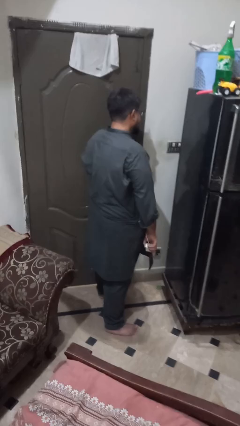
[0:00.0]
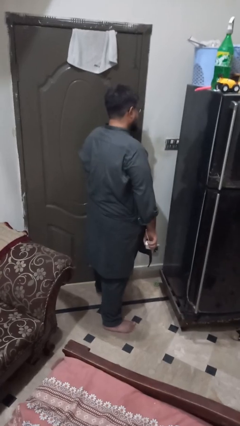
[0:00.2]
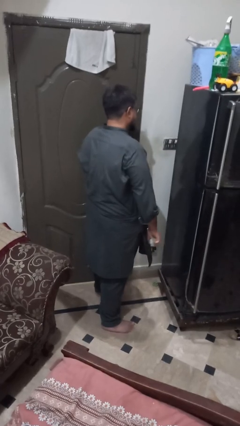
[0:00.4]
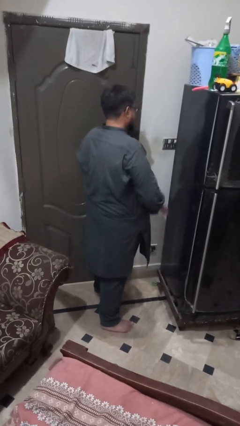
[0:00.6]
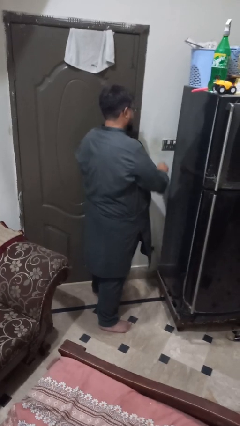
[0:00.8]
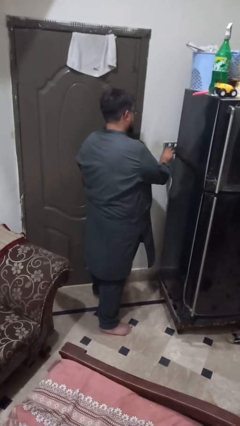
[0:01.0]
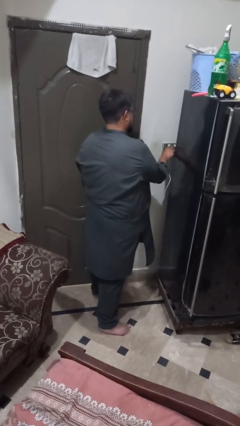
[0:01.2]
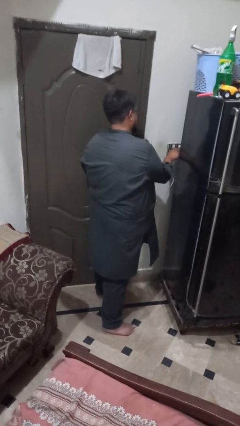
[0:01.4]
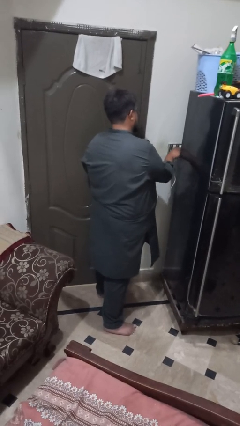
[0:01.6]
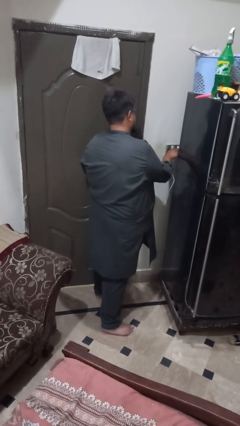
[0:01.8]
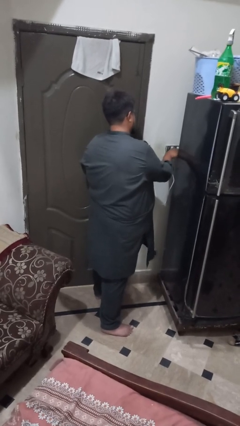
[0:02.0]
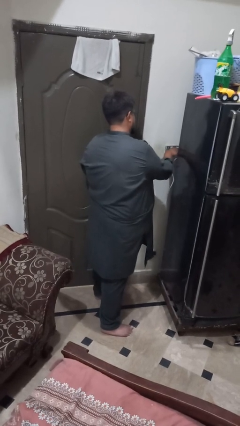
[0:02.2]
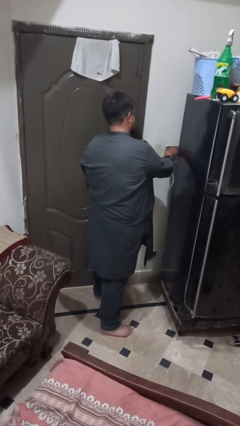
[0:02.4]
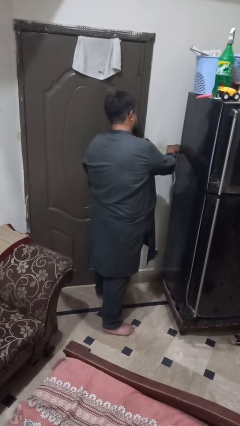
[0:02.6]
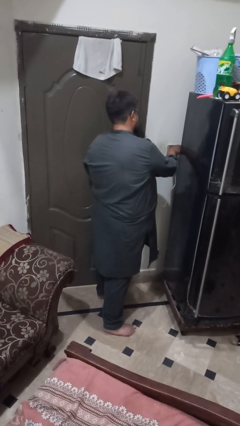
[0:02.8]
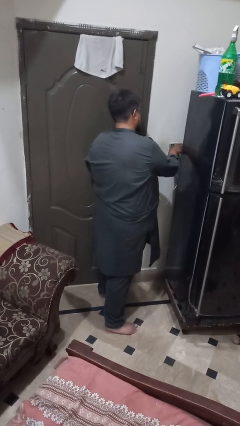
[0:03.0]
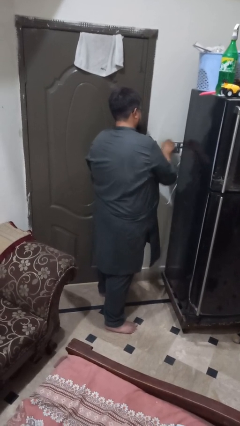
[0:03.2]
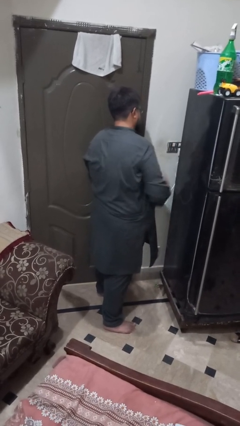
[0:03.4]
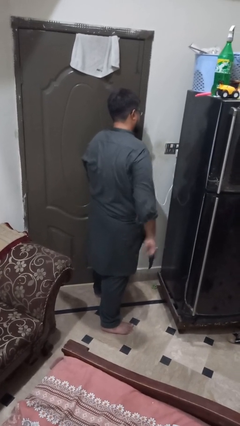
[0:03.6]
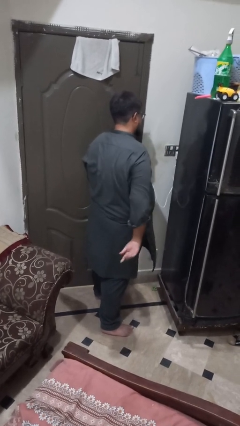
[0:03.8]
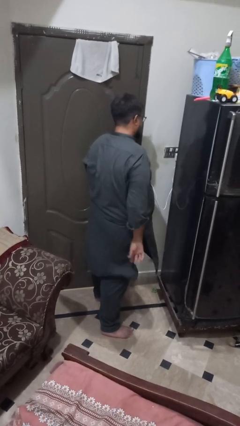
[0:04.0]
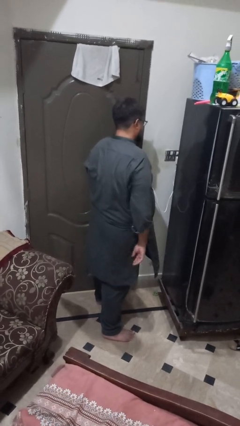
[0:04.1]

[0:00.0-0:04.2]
person plugs into electrical socket

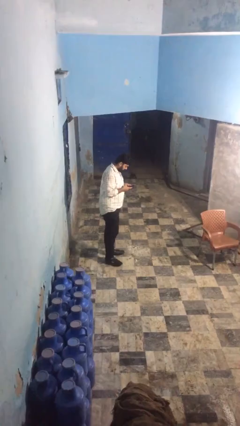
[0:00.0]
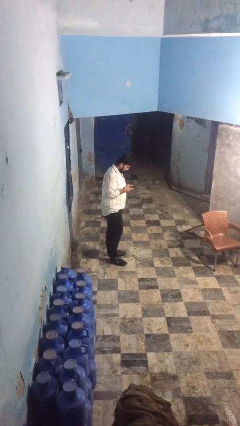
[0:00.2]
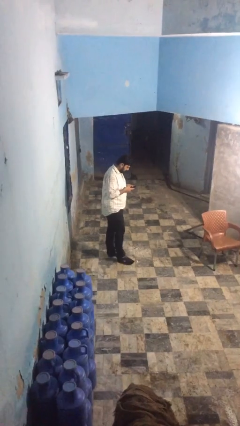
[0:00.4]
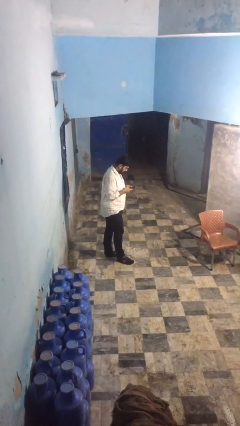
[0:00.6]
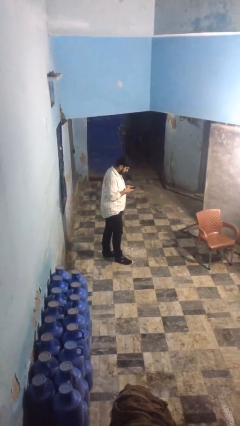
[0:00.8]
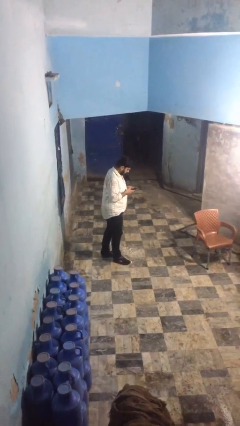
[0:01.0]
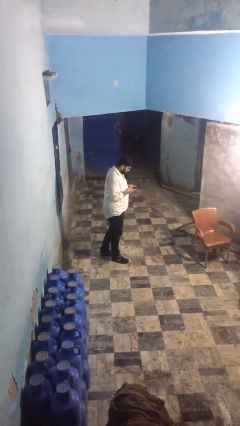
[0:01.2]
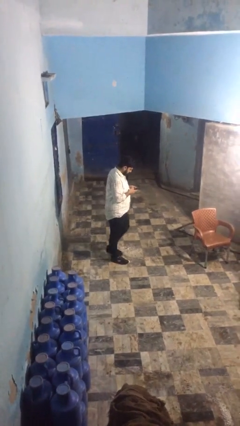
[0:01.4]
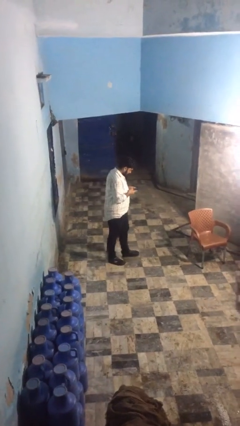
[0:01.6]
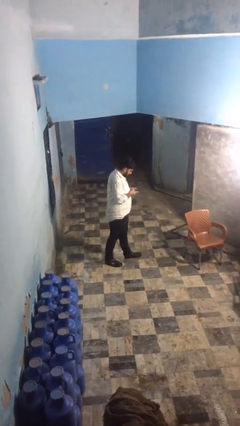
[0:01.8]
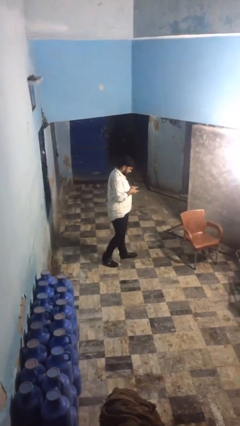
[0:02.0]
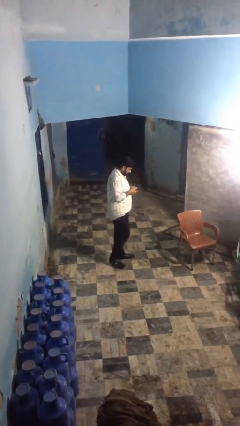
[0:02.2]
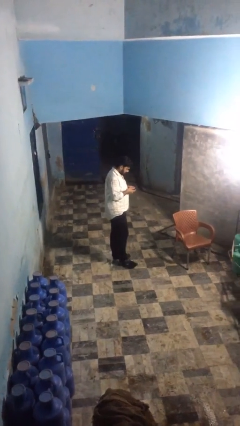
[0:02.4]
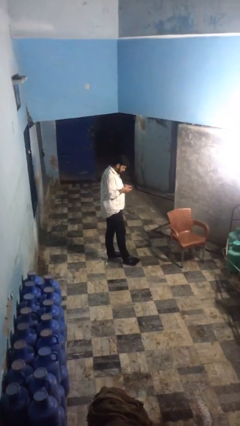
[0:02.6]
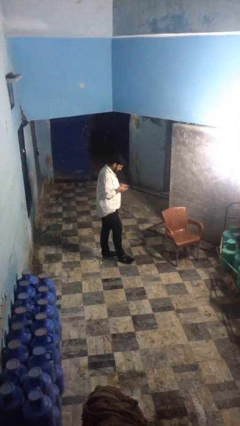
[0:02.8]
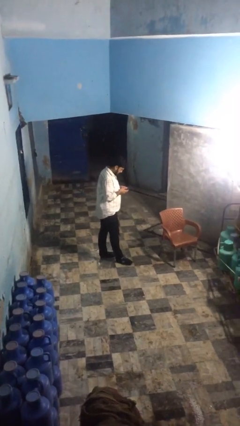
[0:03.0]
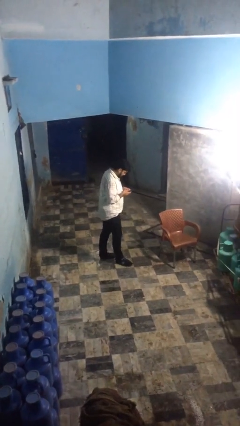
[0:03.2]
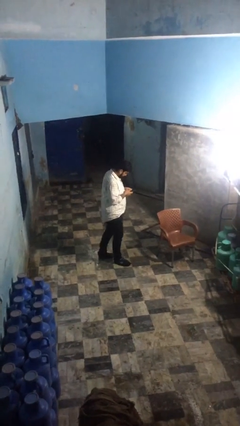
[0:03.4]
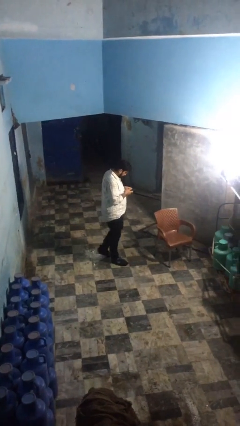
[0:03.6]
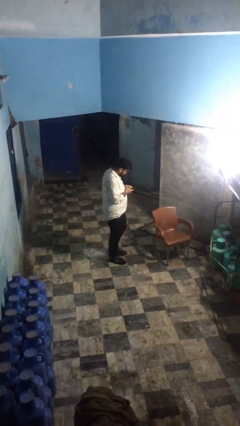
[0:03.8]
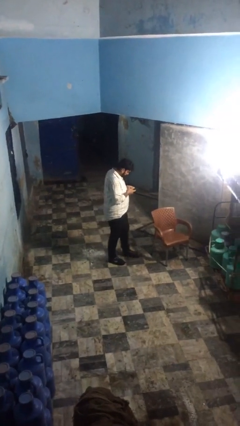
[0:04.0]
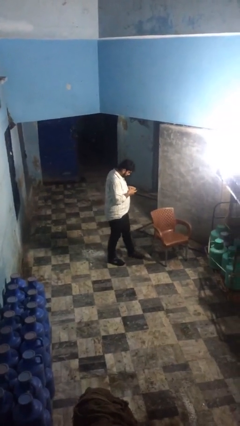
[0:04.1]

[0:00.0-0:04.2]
person texts on phone

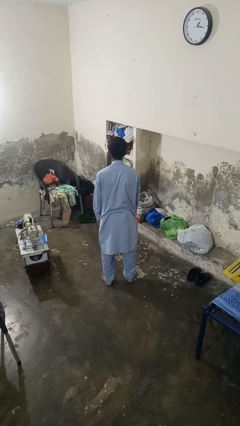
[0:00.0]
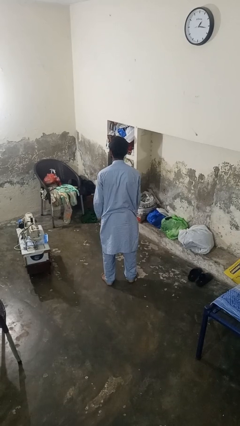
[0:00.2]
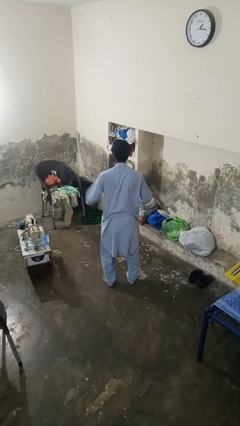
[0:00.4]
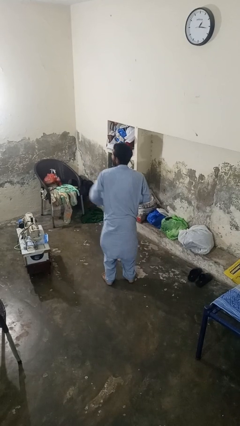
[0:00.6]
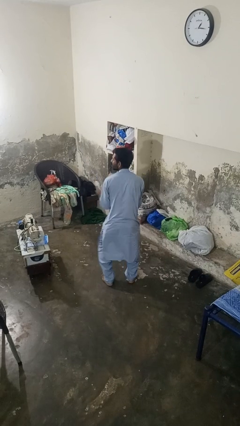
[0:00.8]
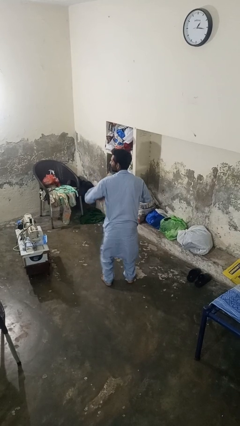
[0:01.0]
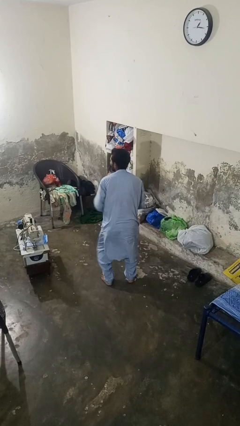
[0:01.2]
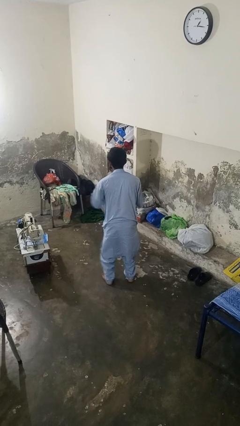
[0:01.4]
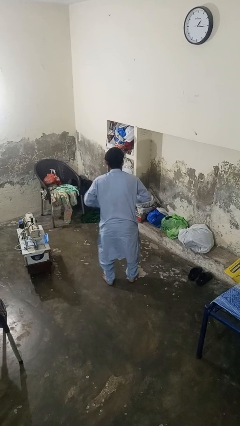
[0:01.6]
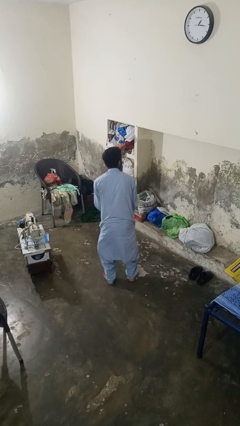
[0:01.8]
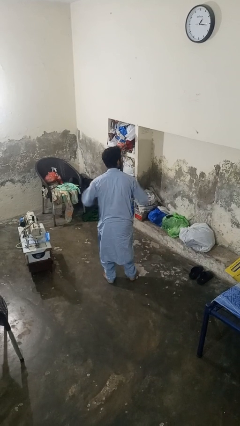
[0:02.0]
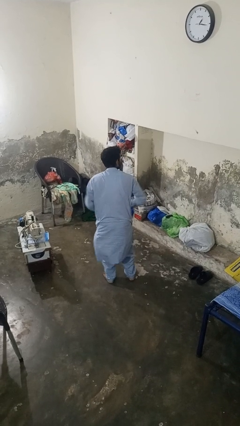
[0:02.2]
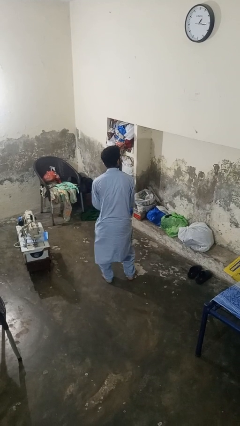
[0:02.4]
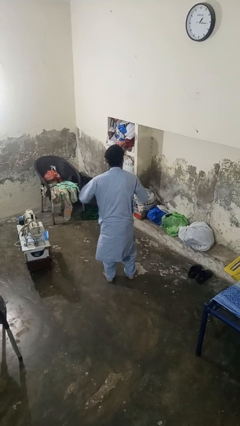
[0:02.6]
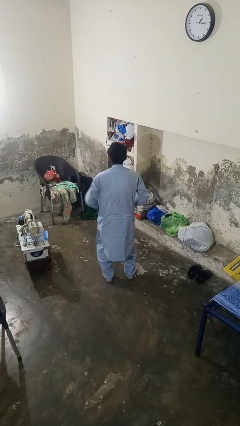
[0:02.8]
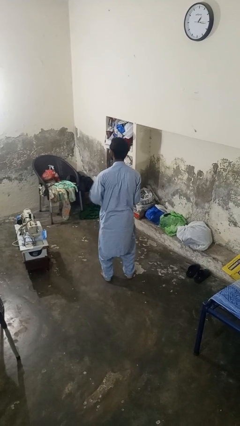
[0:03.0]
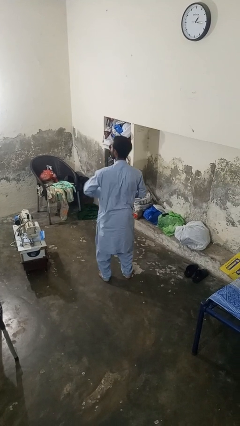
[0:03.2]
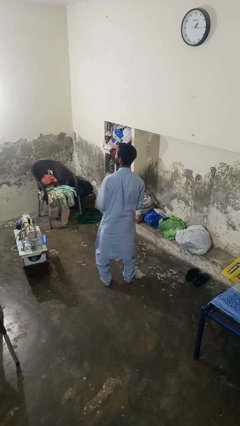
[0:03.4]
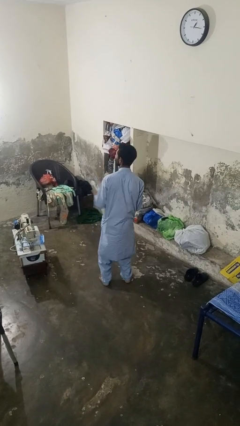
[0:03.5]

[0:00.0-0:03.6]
person dances in place

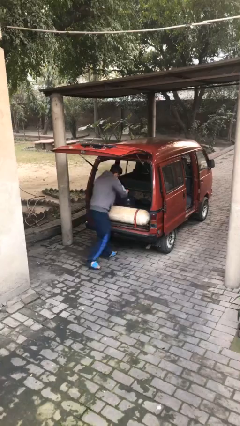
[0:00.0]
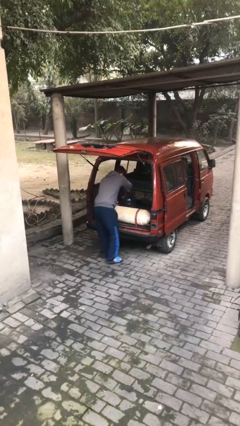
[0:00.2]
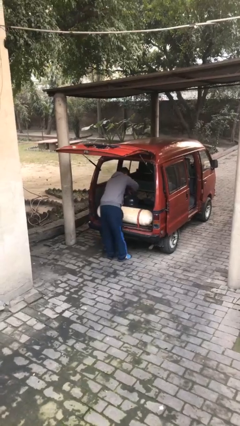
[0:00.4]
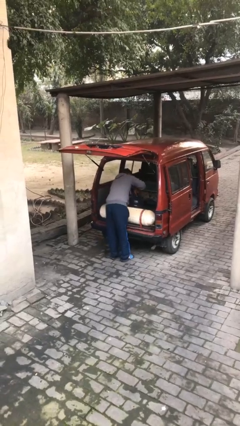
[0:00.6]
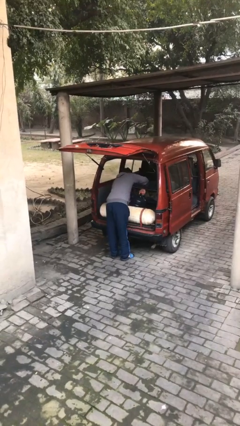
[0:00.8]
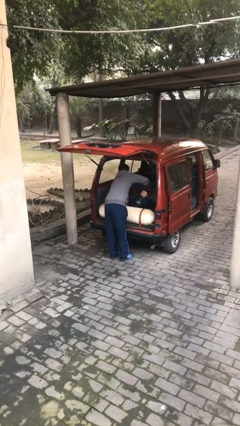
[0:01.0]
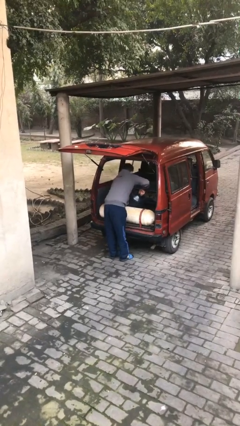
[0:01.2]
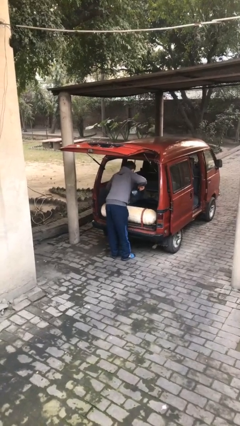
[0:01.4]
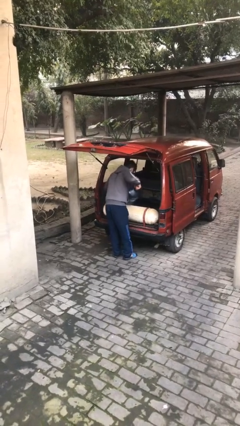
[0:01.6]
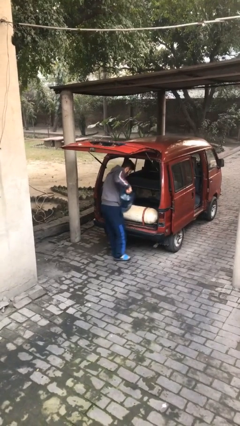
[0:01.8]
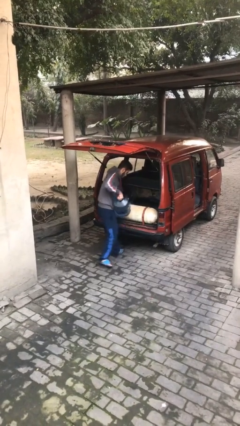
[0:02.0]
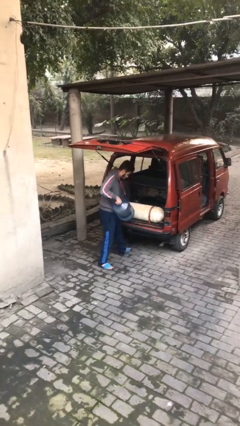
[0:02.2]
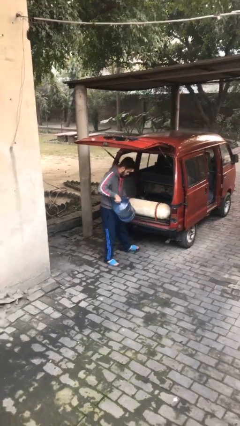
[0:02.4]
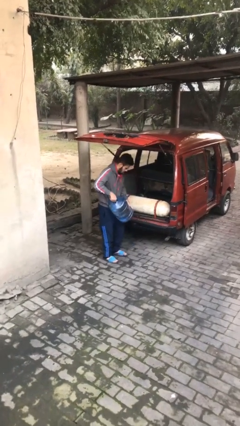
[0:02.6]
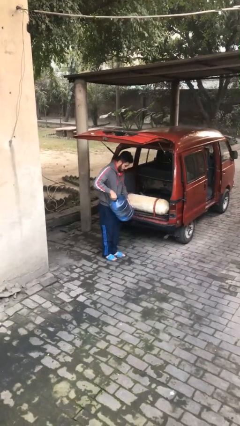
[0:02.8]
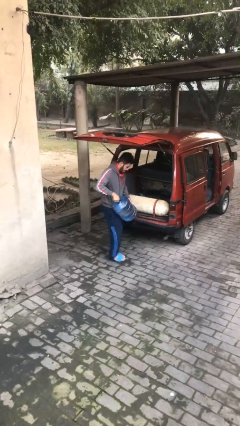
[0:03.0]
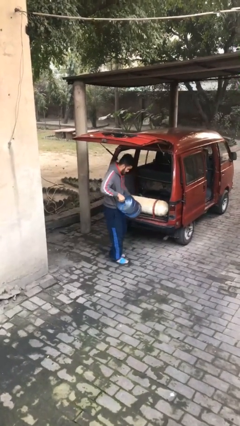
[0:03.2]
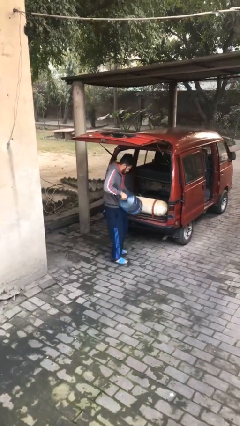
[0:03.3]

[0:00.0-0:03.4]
person unloads car

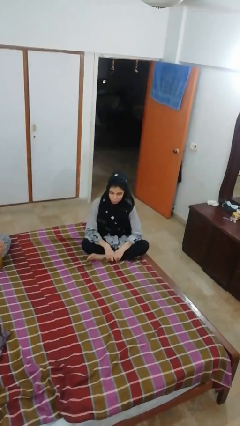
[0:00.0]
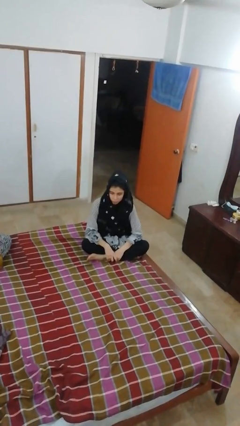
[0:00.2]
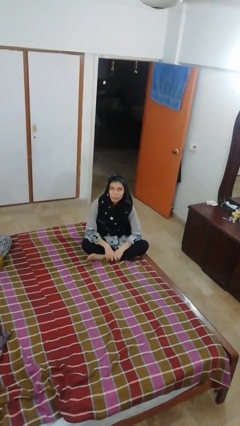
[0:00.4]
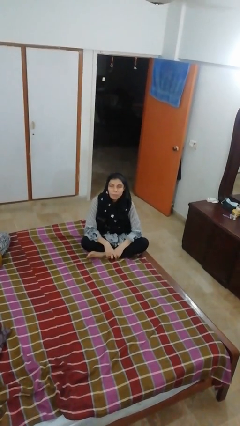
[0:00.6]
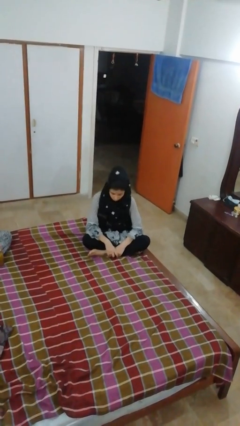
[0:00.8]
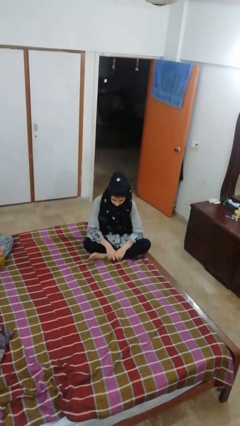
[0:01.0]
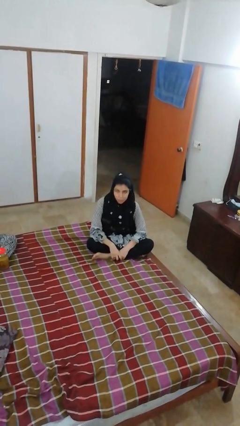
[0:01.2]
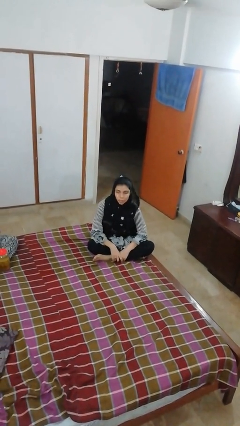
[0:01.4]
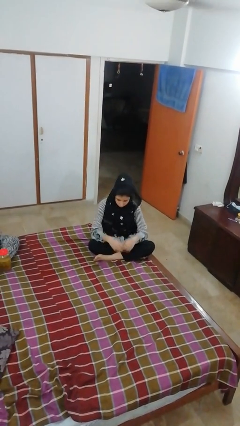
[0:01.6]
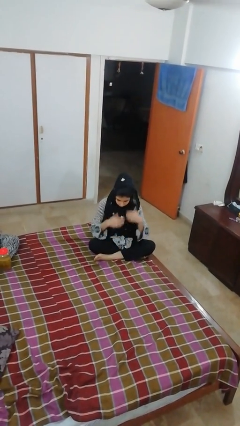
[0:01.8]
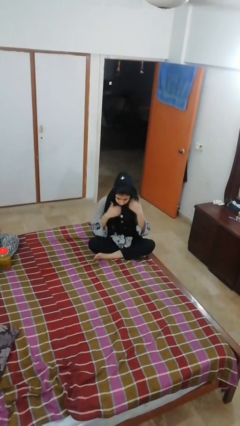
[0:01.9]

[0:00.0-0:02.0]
person nods head

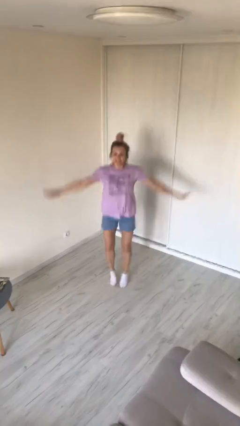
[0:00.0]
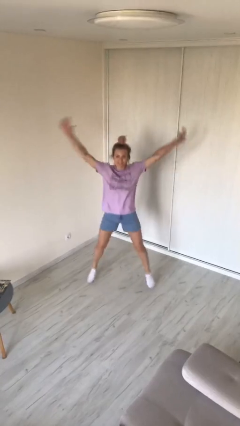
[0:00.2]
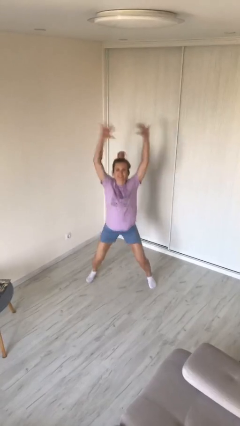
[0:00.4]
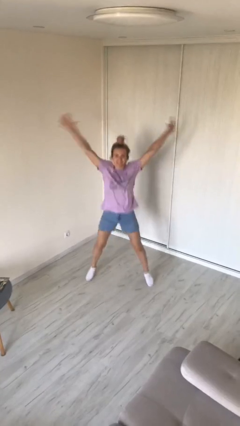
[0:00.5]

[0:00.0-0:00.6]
person exercises with jumping jacks
